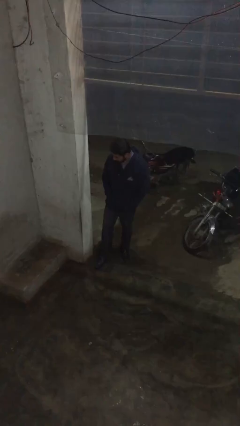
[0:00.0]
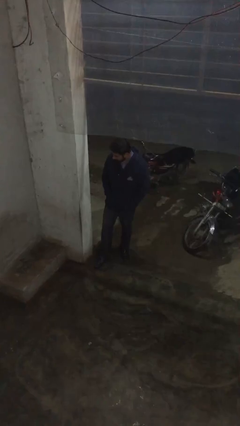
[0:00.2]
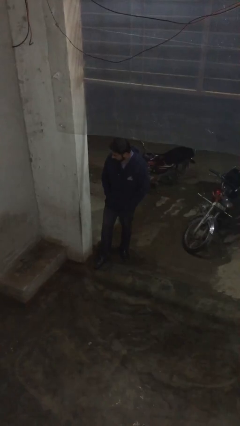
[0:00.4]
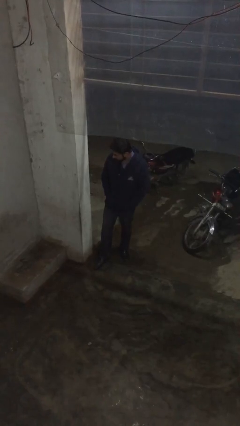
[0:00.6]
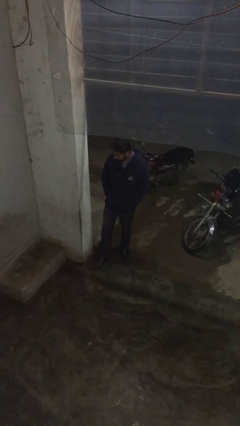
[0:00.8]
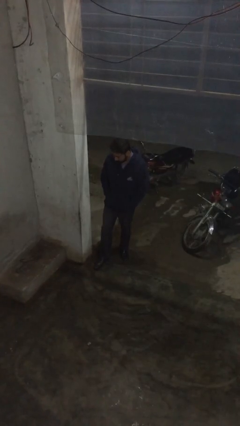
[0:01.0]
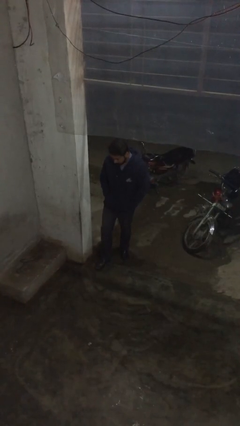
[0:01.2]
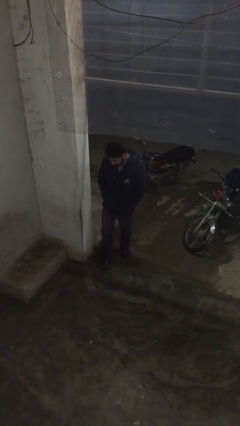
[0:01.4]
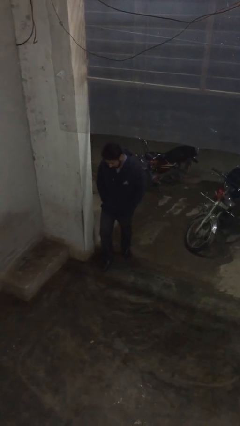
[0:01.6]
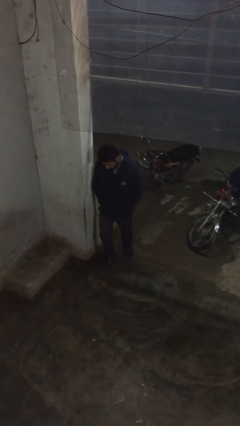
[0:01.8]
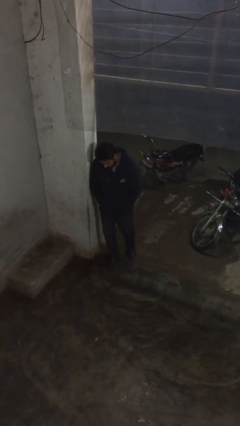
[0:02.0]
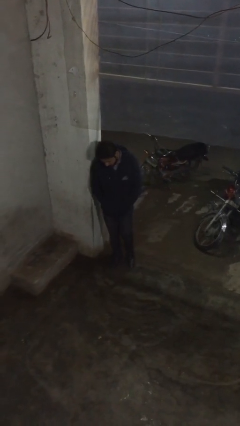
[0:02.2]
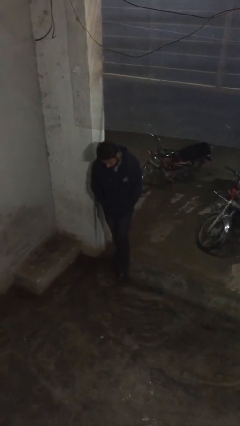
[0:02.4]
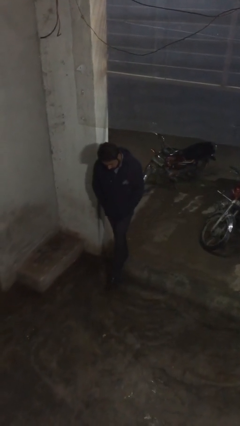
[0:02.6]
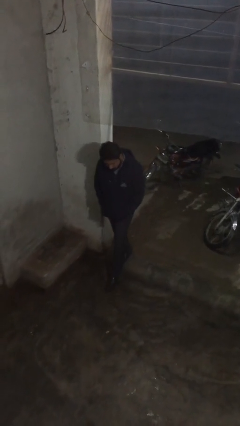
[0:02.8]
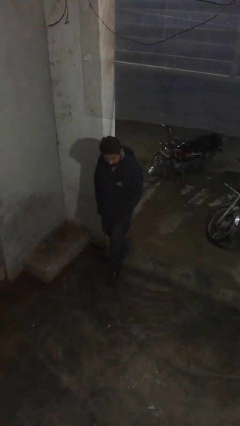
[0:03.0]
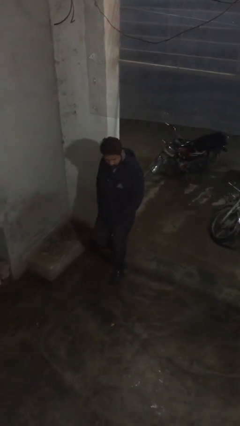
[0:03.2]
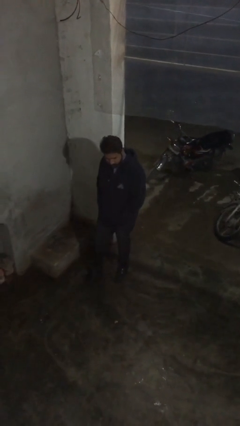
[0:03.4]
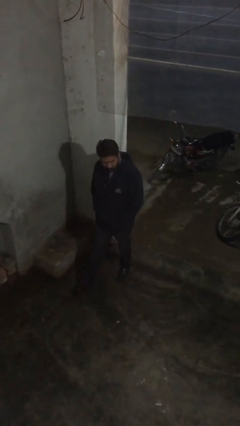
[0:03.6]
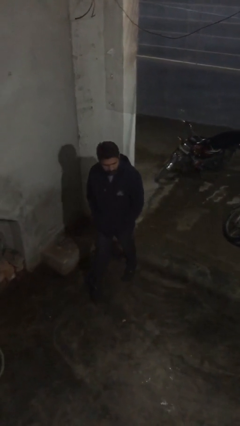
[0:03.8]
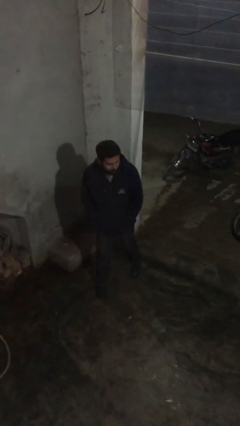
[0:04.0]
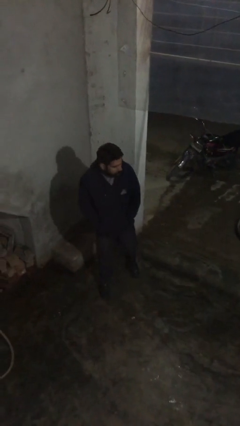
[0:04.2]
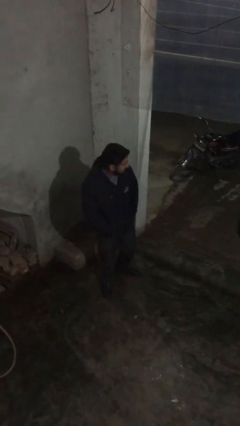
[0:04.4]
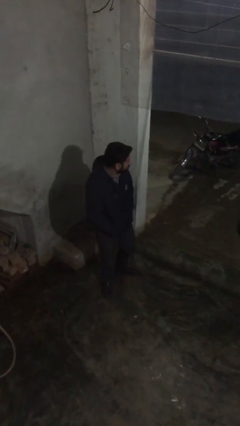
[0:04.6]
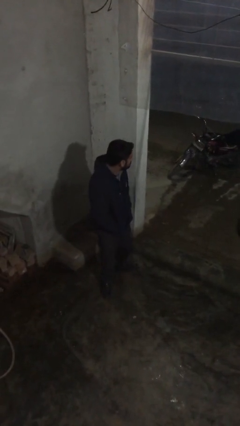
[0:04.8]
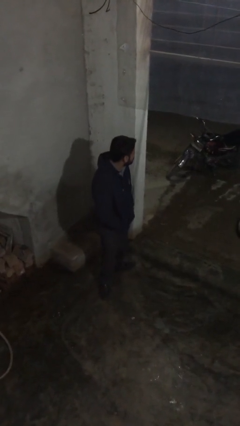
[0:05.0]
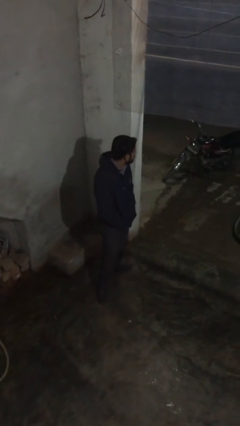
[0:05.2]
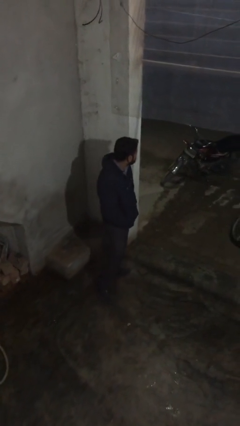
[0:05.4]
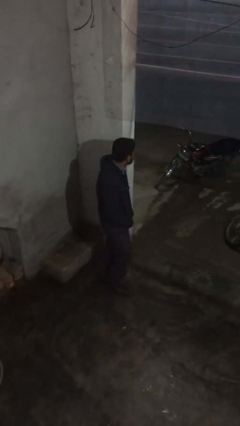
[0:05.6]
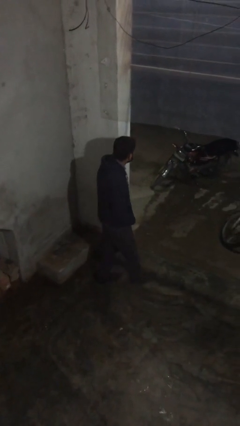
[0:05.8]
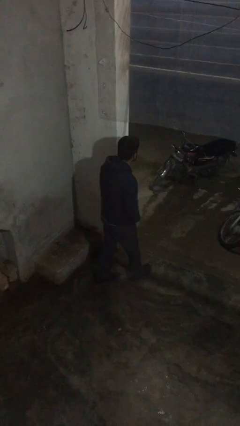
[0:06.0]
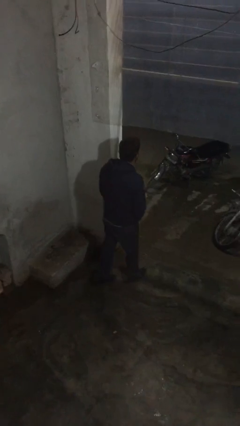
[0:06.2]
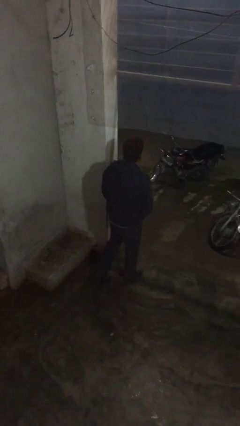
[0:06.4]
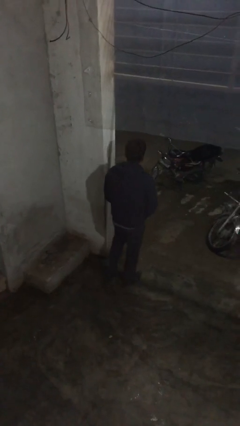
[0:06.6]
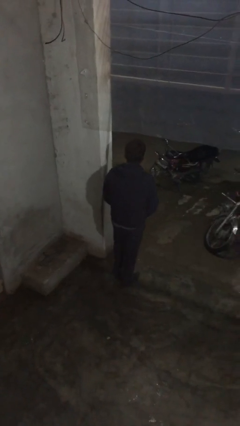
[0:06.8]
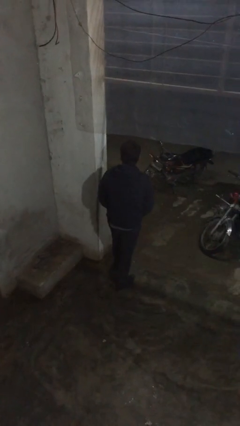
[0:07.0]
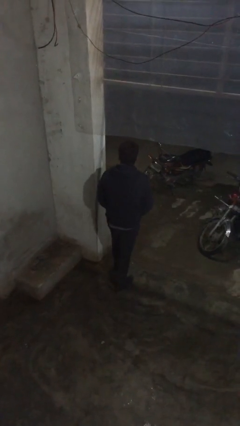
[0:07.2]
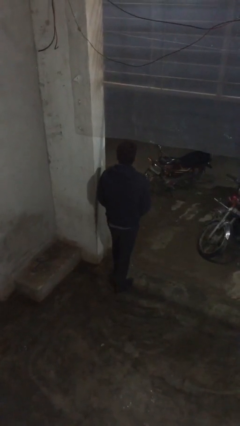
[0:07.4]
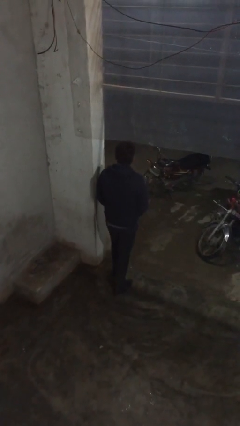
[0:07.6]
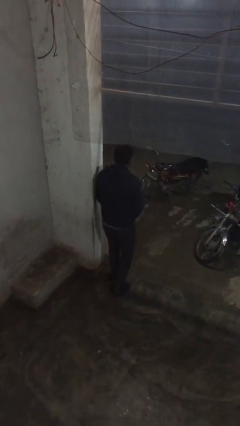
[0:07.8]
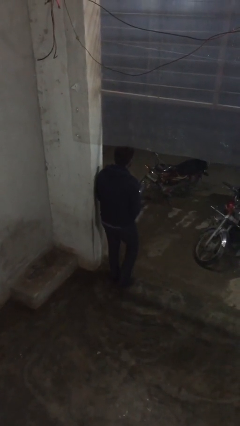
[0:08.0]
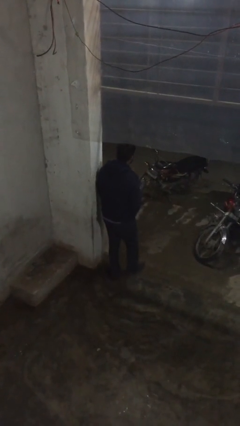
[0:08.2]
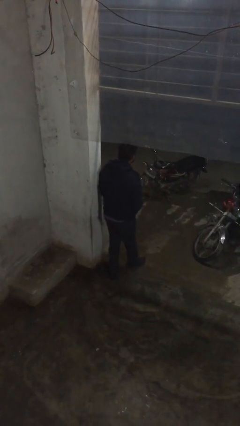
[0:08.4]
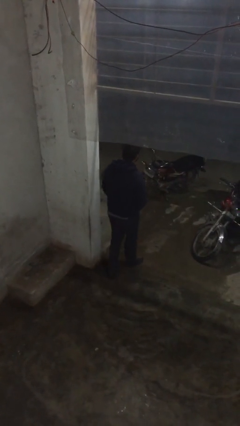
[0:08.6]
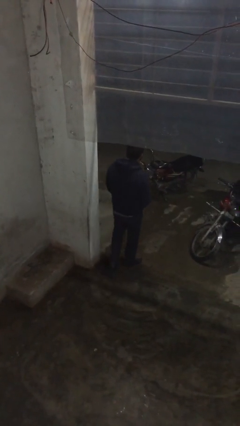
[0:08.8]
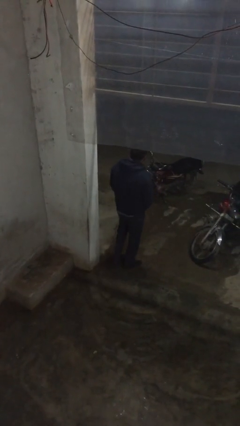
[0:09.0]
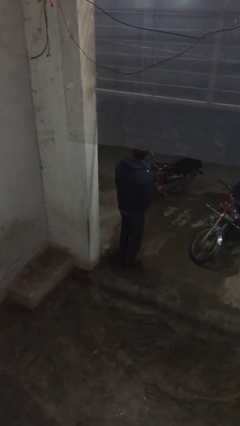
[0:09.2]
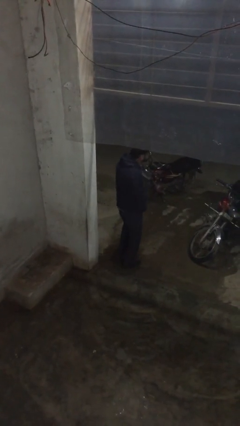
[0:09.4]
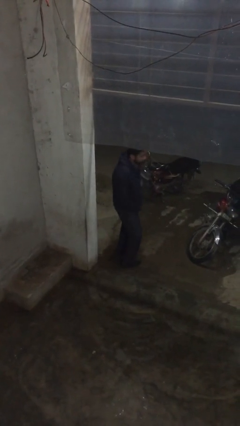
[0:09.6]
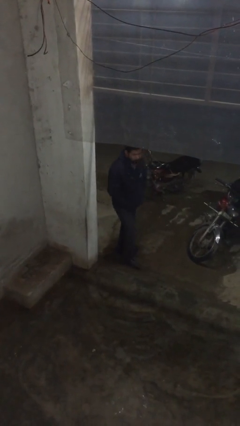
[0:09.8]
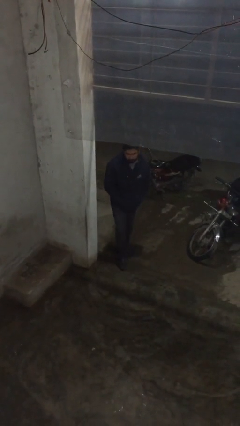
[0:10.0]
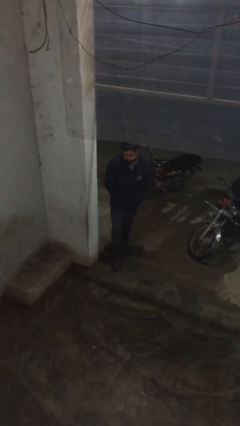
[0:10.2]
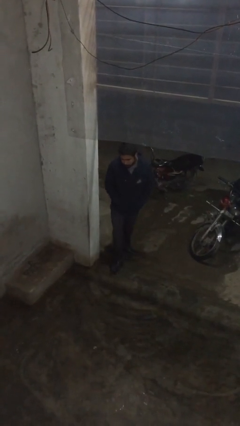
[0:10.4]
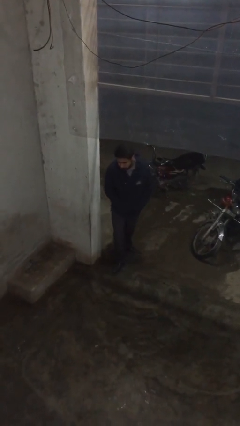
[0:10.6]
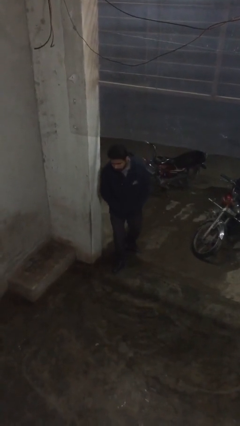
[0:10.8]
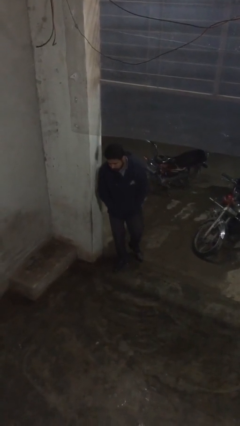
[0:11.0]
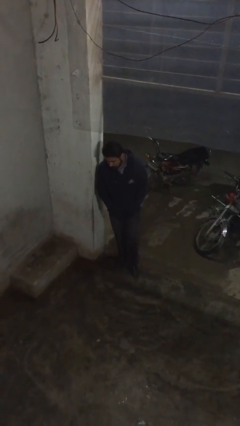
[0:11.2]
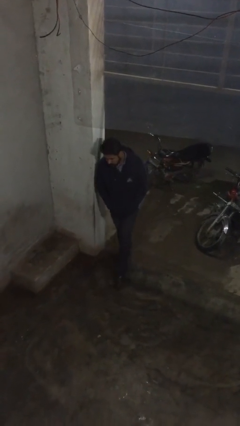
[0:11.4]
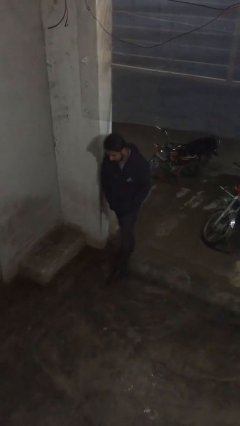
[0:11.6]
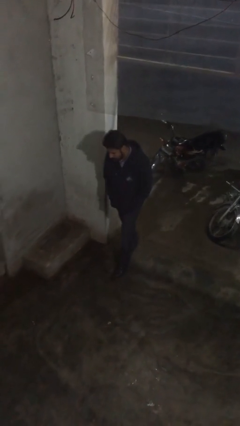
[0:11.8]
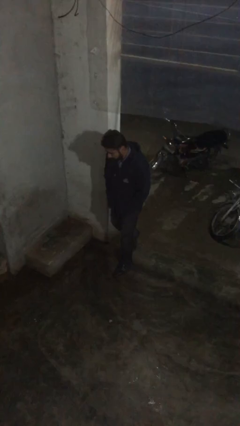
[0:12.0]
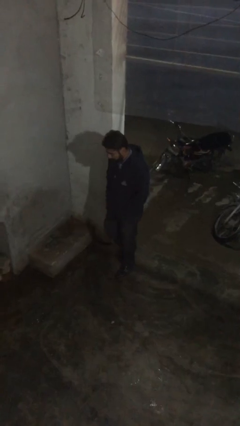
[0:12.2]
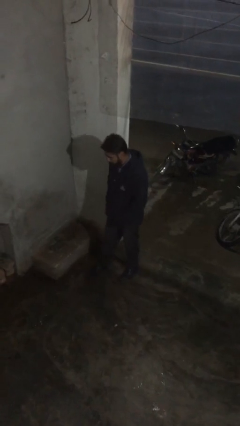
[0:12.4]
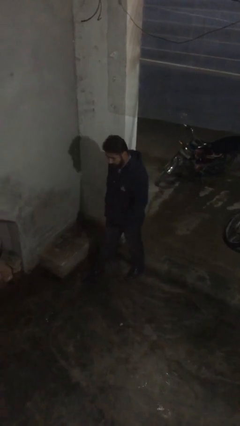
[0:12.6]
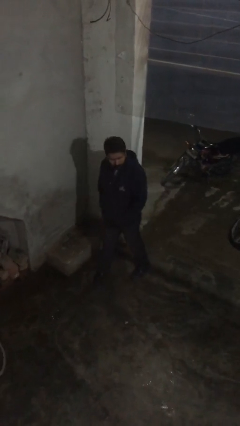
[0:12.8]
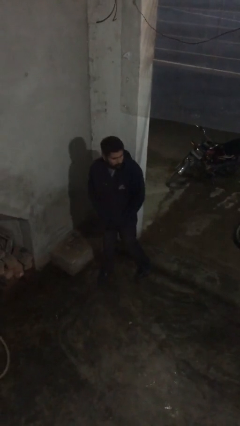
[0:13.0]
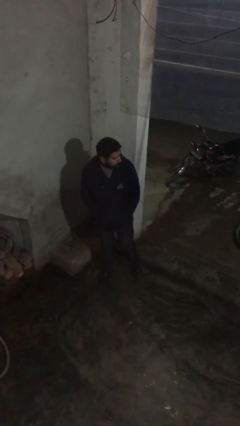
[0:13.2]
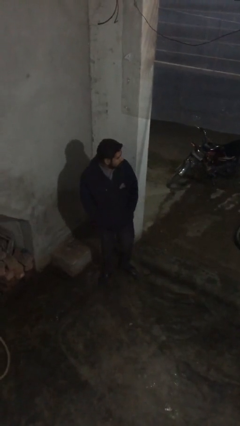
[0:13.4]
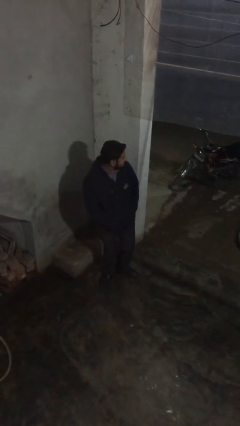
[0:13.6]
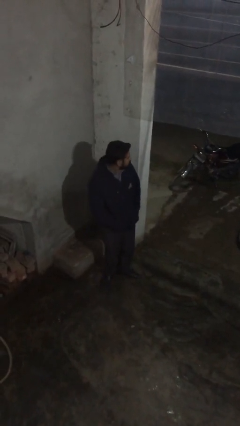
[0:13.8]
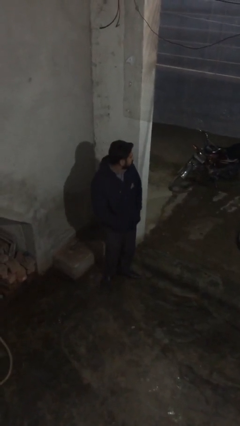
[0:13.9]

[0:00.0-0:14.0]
person walks

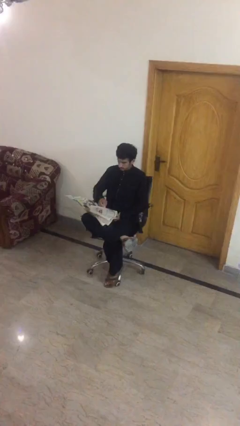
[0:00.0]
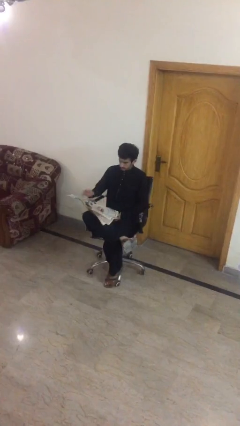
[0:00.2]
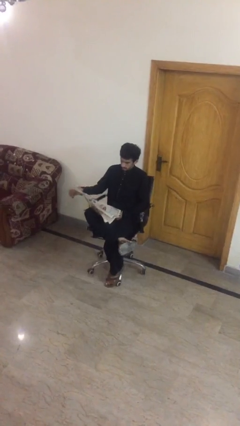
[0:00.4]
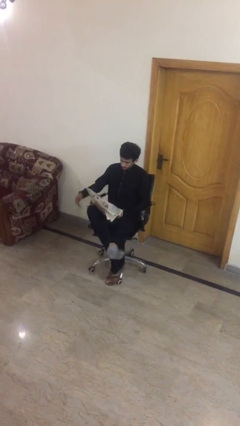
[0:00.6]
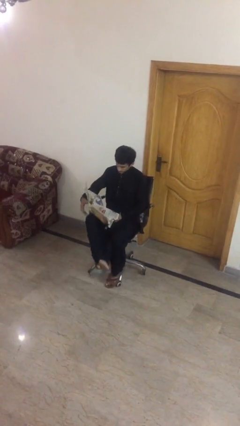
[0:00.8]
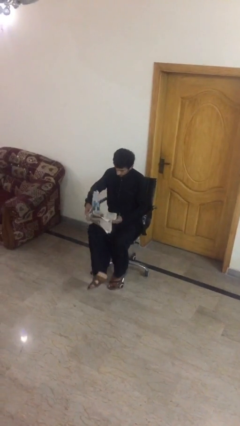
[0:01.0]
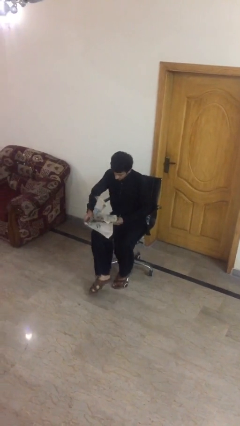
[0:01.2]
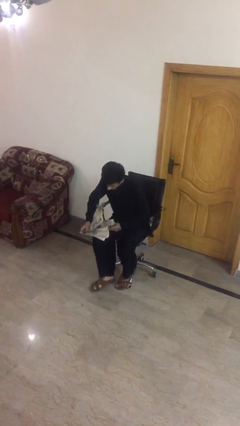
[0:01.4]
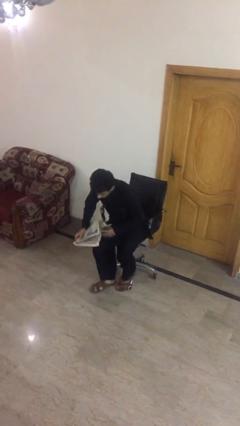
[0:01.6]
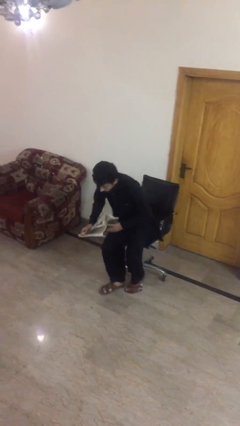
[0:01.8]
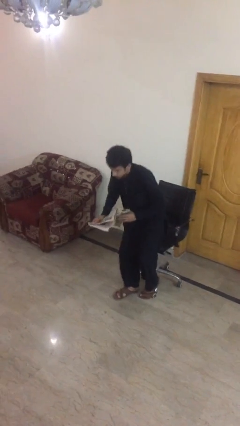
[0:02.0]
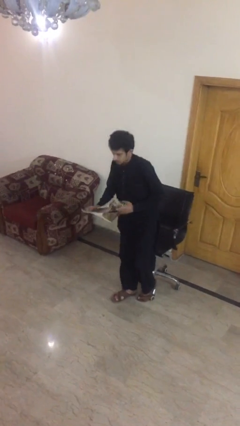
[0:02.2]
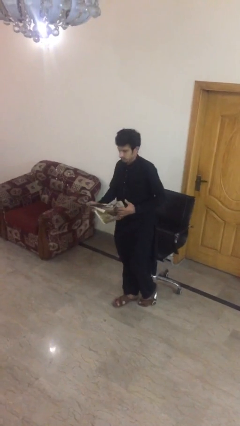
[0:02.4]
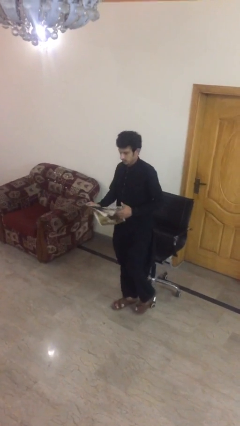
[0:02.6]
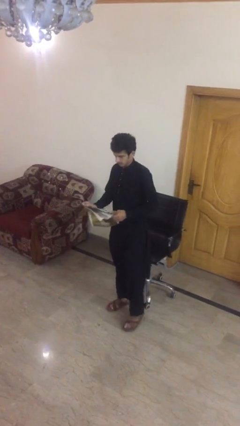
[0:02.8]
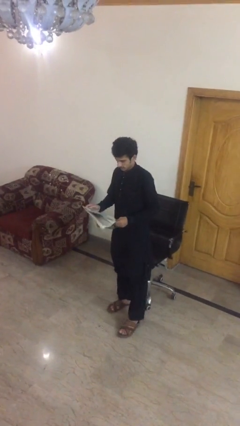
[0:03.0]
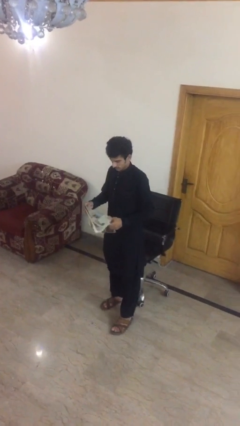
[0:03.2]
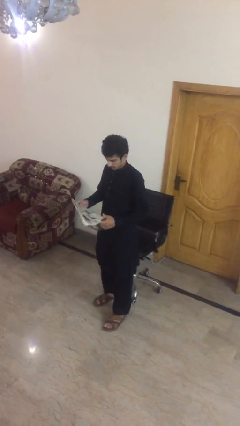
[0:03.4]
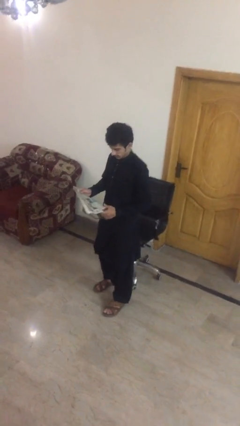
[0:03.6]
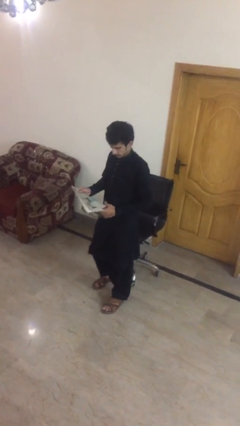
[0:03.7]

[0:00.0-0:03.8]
person stands up

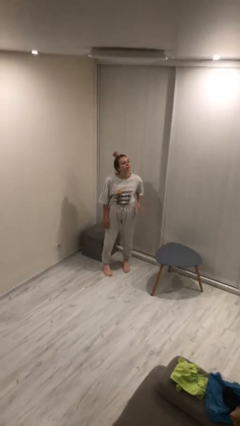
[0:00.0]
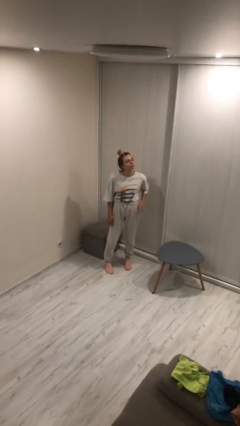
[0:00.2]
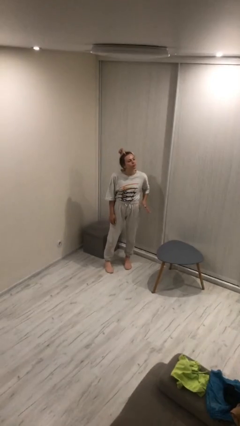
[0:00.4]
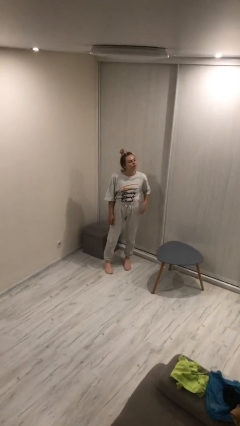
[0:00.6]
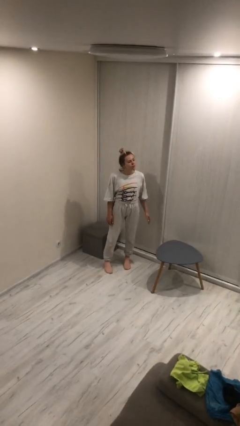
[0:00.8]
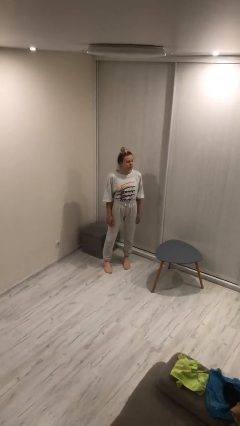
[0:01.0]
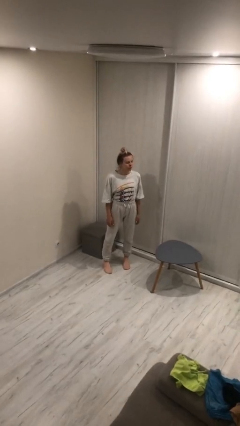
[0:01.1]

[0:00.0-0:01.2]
person slaps hands on thighs
